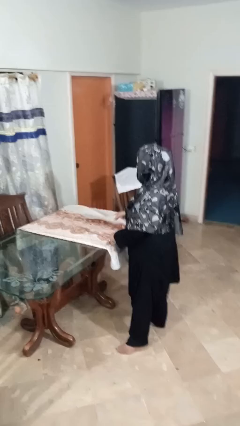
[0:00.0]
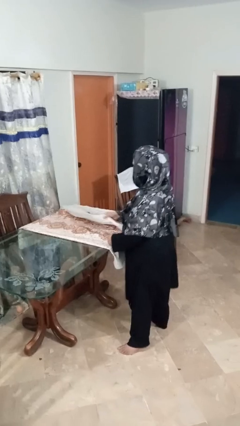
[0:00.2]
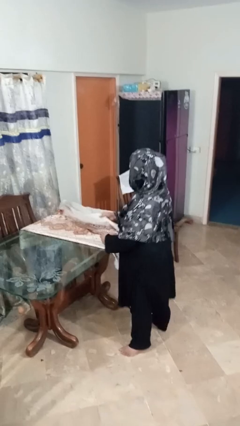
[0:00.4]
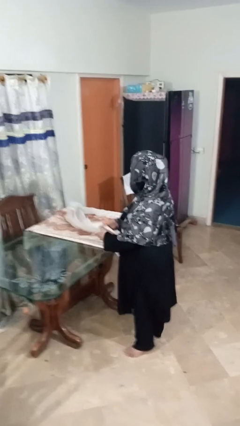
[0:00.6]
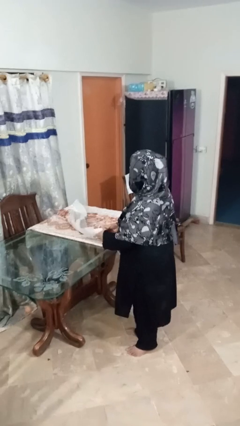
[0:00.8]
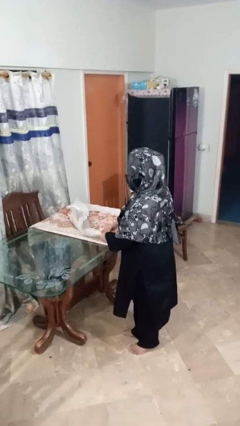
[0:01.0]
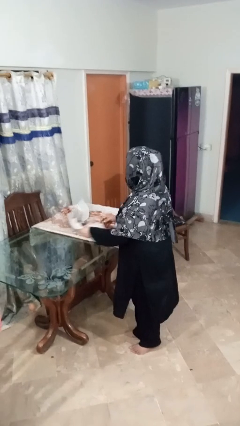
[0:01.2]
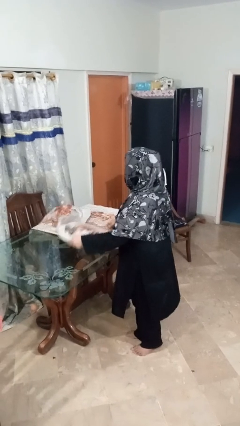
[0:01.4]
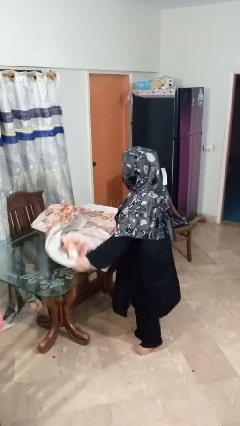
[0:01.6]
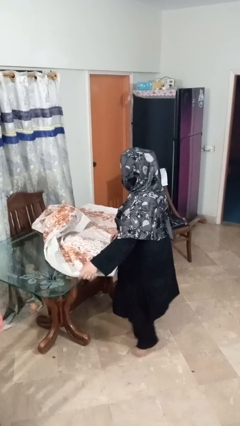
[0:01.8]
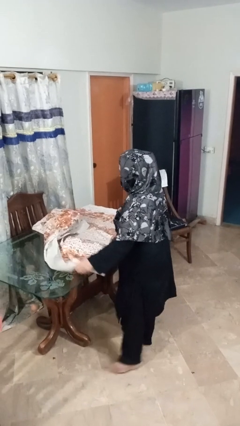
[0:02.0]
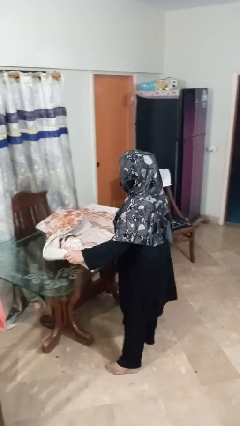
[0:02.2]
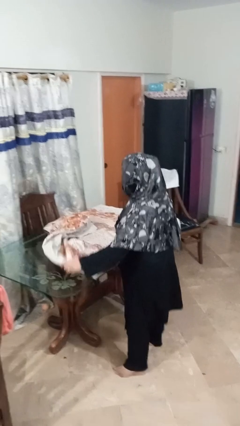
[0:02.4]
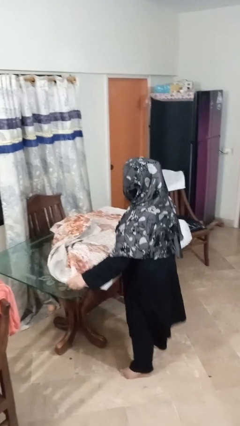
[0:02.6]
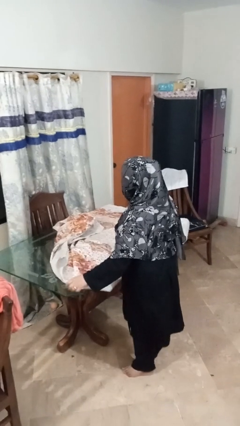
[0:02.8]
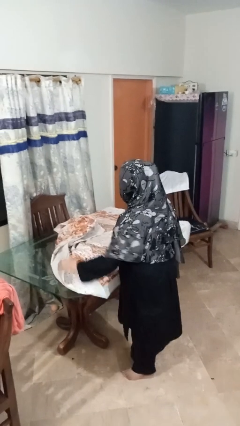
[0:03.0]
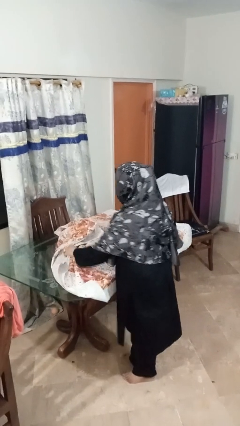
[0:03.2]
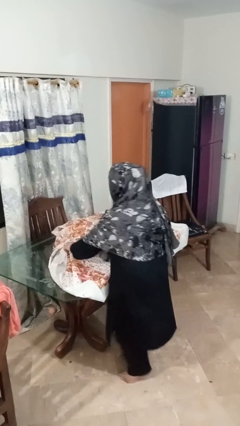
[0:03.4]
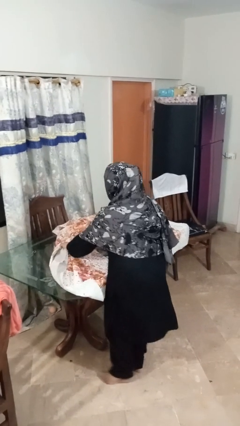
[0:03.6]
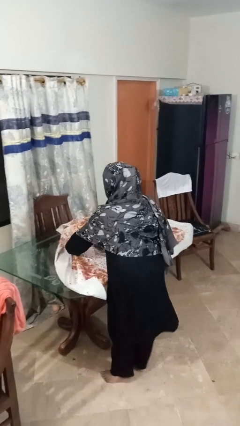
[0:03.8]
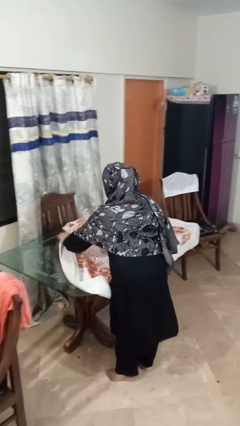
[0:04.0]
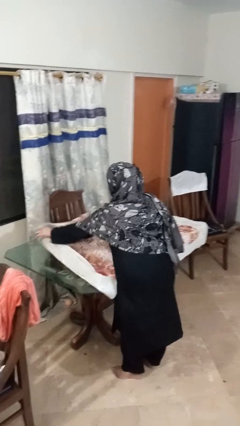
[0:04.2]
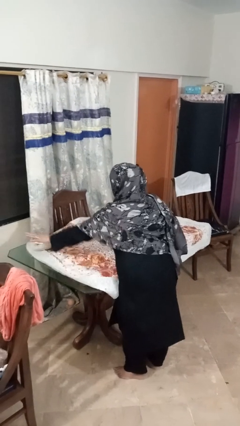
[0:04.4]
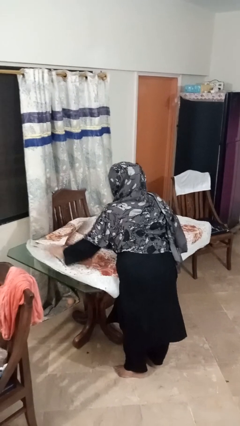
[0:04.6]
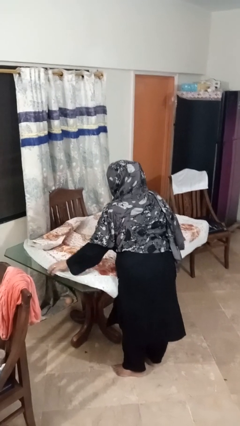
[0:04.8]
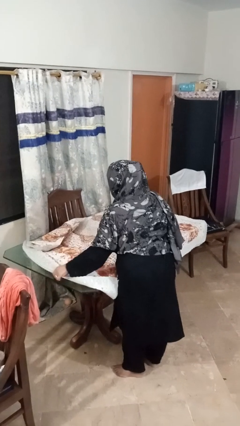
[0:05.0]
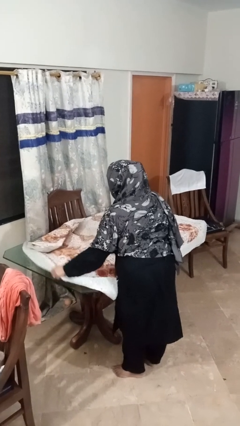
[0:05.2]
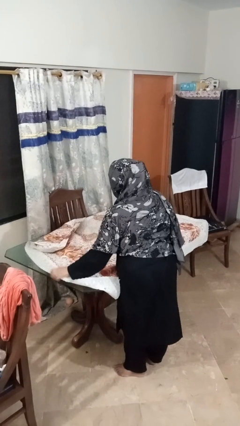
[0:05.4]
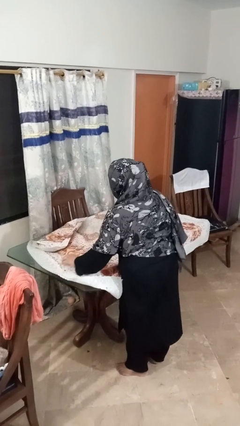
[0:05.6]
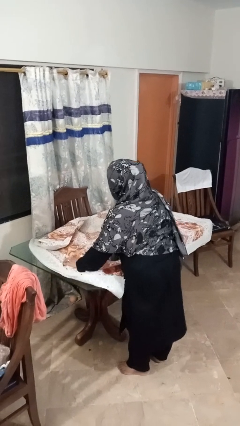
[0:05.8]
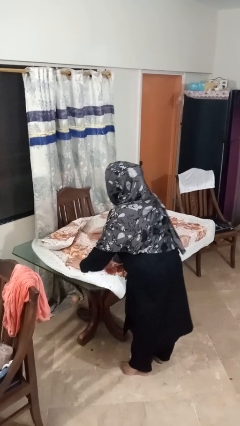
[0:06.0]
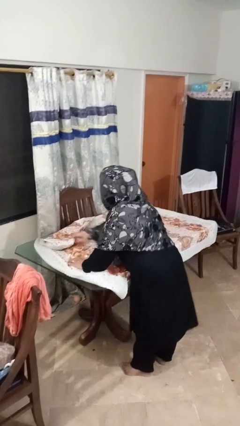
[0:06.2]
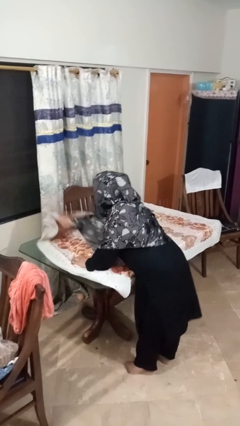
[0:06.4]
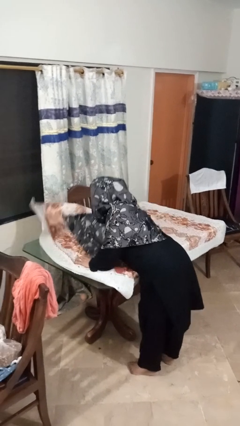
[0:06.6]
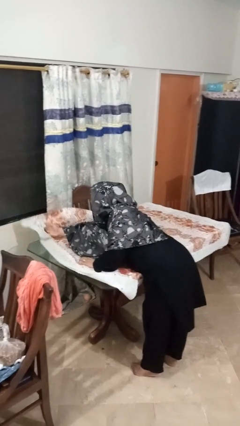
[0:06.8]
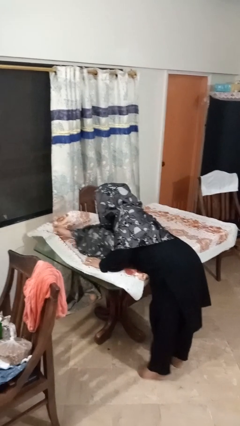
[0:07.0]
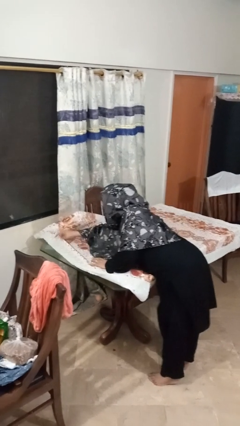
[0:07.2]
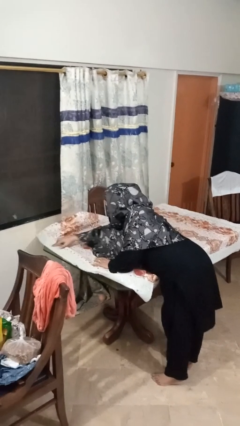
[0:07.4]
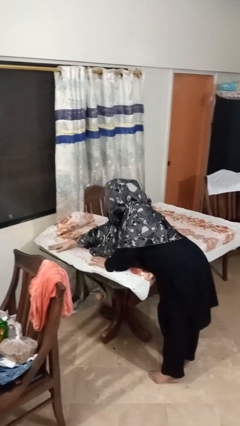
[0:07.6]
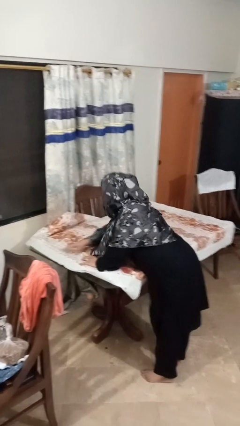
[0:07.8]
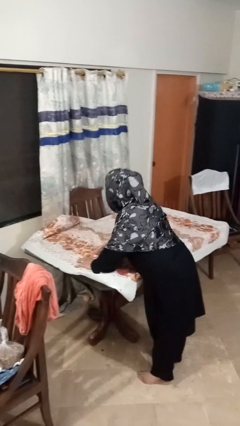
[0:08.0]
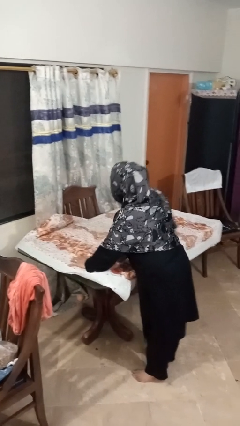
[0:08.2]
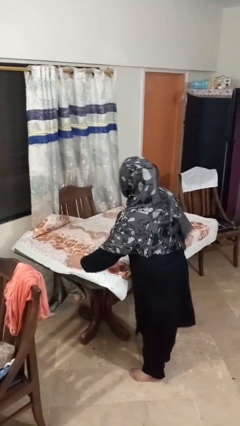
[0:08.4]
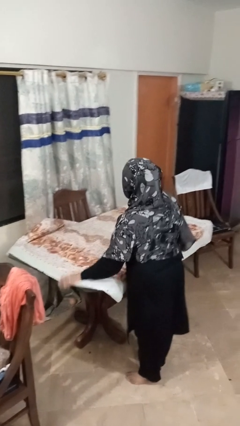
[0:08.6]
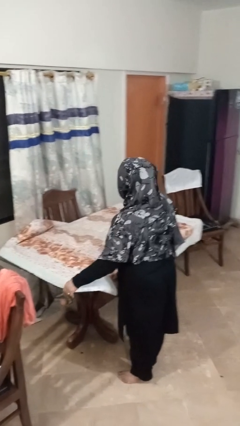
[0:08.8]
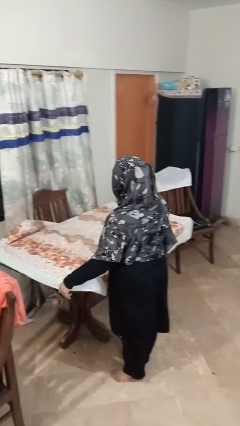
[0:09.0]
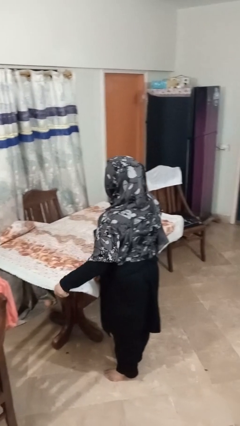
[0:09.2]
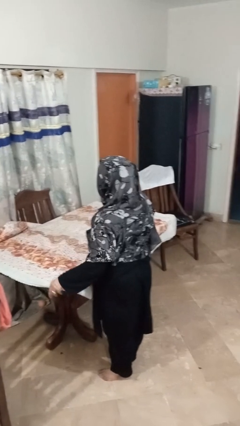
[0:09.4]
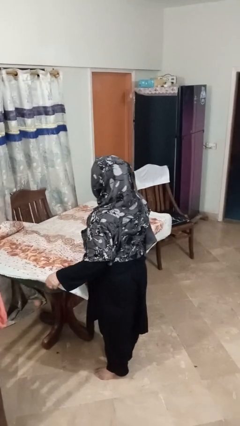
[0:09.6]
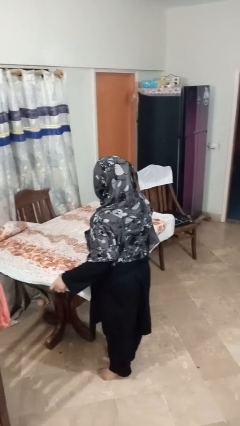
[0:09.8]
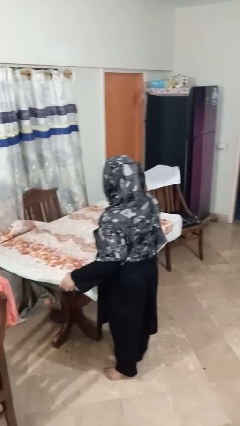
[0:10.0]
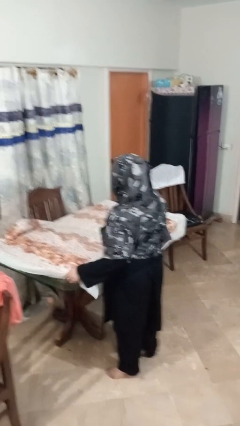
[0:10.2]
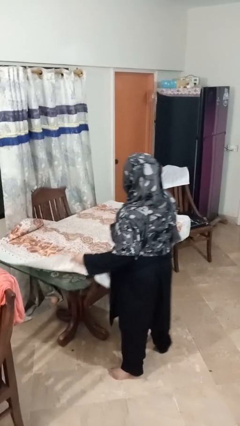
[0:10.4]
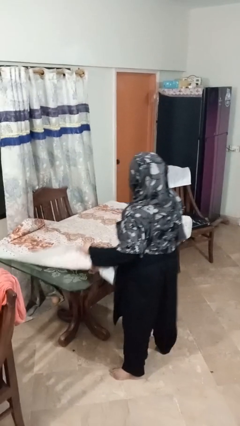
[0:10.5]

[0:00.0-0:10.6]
person spreads tablecloth

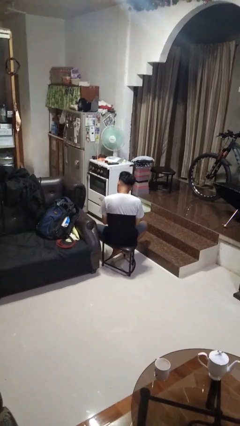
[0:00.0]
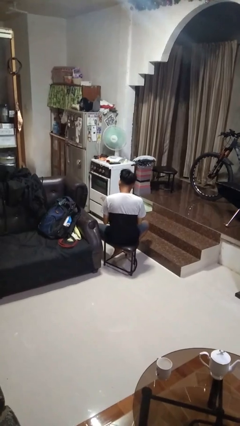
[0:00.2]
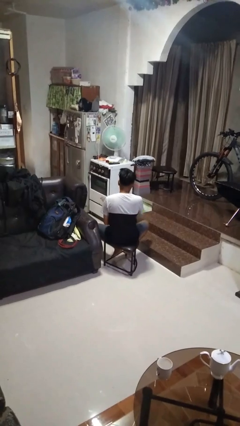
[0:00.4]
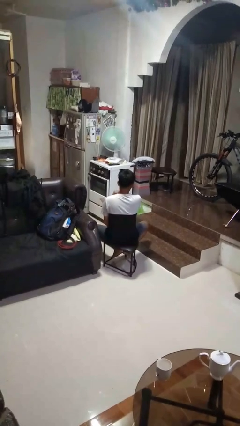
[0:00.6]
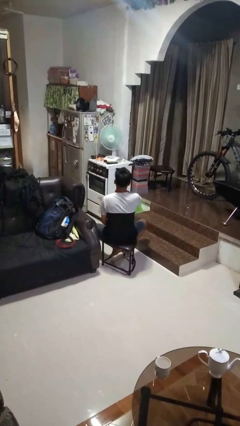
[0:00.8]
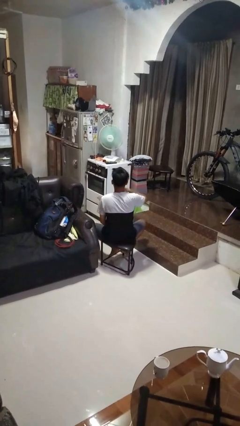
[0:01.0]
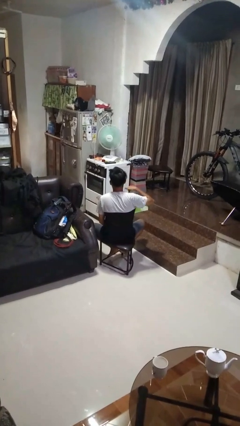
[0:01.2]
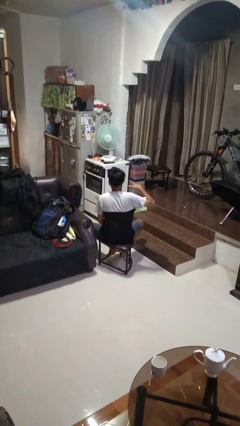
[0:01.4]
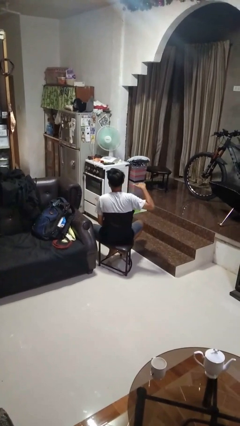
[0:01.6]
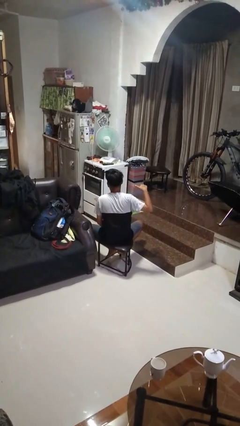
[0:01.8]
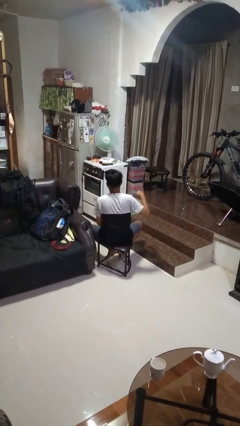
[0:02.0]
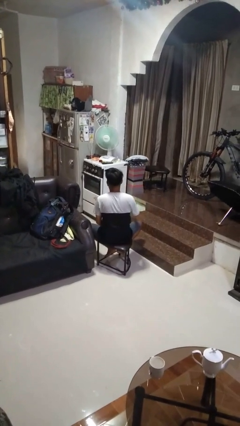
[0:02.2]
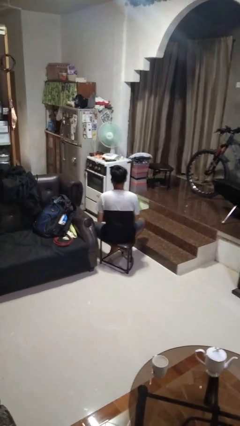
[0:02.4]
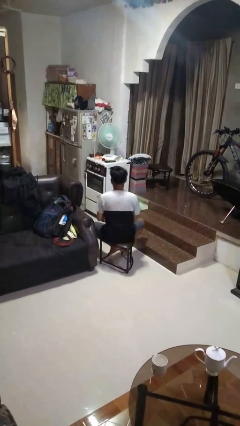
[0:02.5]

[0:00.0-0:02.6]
person gestures cut

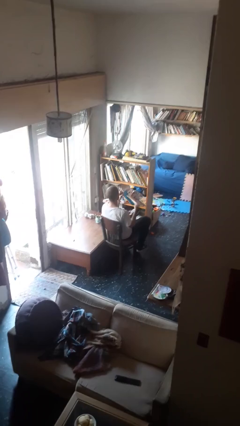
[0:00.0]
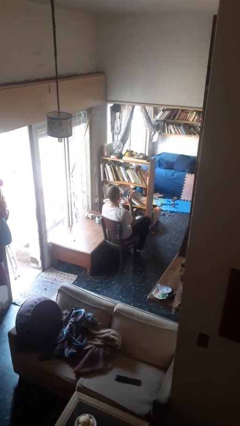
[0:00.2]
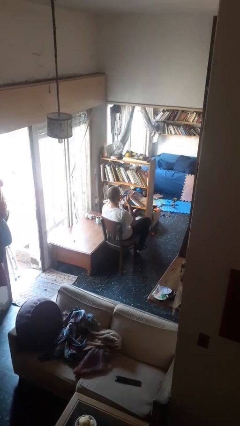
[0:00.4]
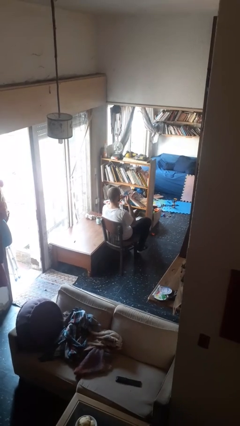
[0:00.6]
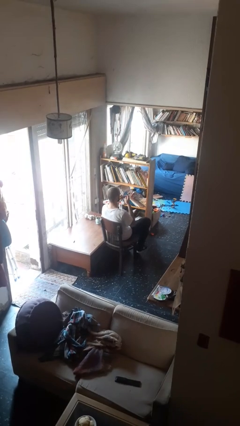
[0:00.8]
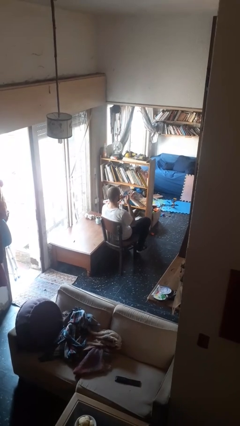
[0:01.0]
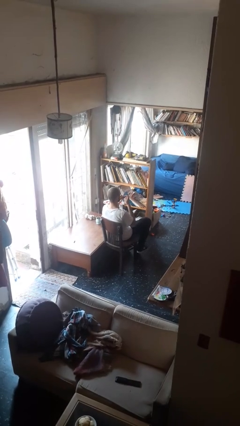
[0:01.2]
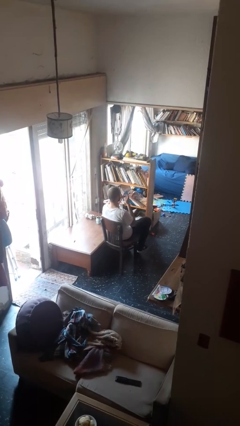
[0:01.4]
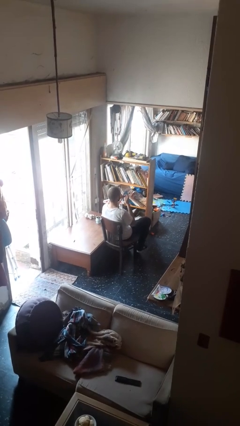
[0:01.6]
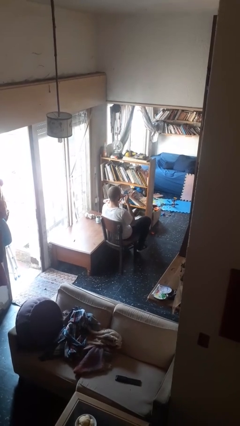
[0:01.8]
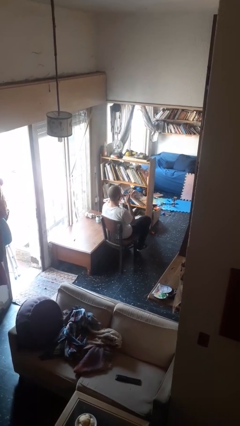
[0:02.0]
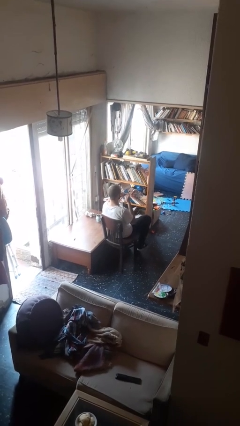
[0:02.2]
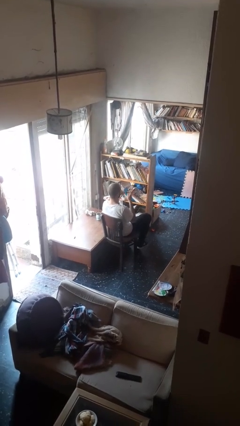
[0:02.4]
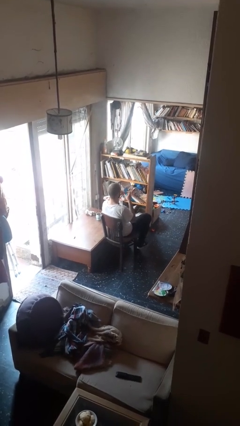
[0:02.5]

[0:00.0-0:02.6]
person files fingernails

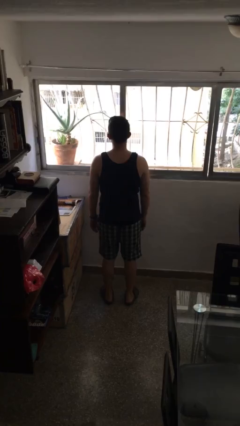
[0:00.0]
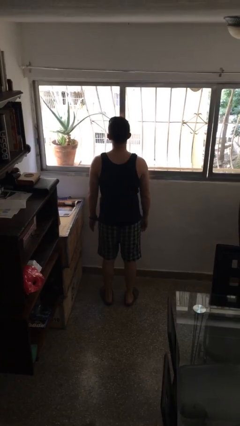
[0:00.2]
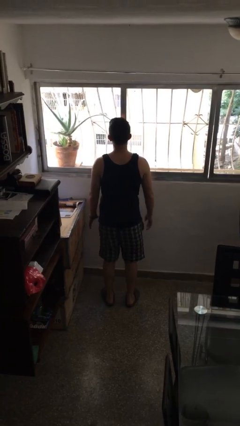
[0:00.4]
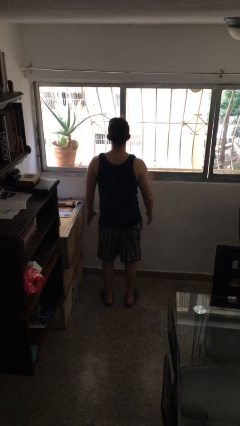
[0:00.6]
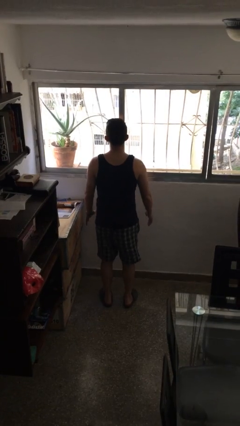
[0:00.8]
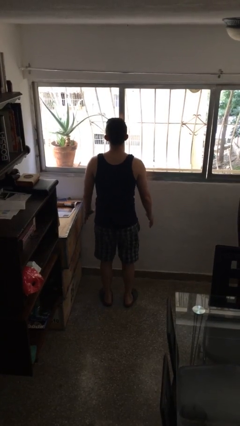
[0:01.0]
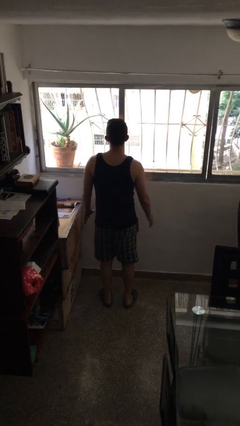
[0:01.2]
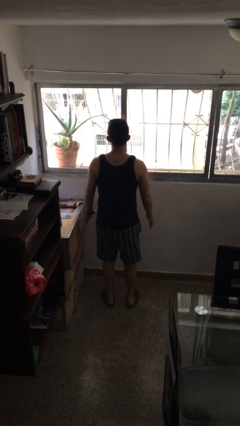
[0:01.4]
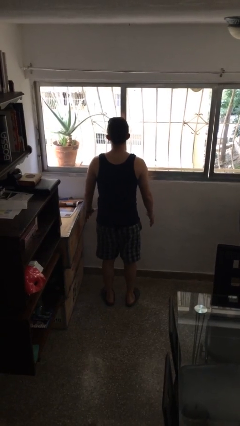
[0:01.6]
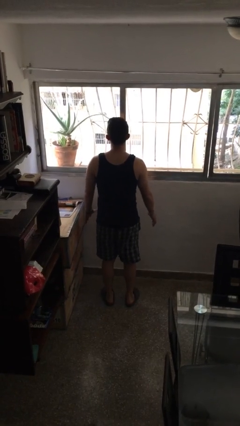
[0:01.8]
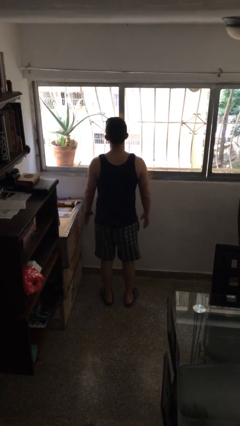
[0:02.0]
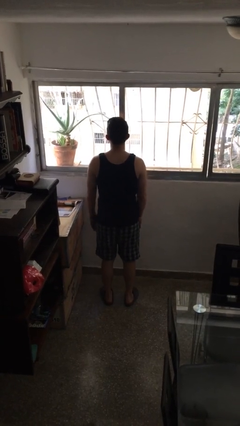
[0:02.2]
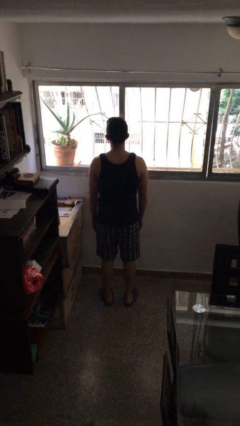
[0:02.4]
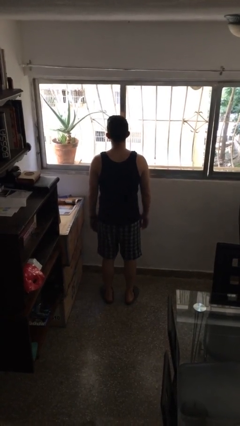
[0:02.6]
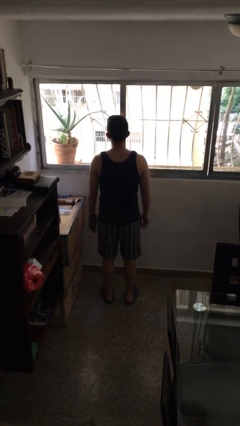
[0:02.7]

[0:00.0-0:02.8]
person wiggles hips
